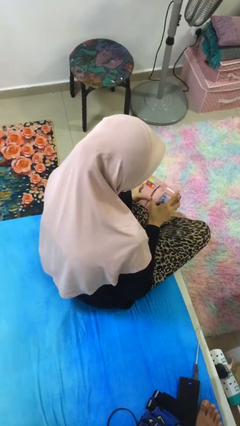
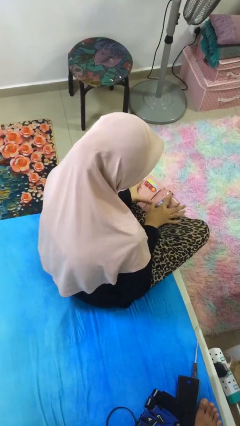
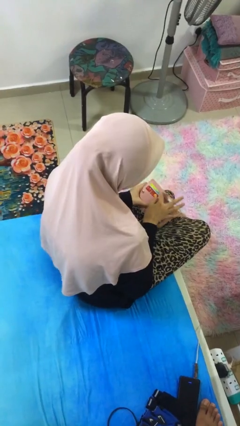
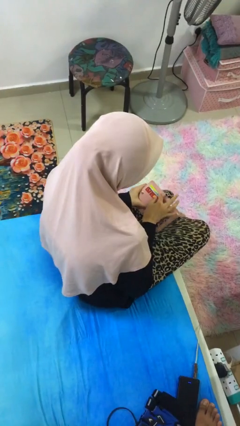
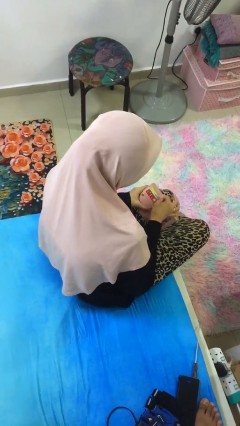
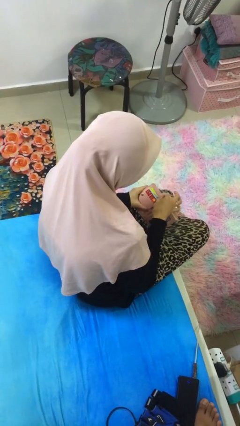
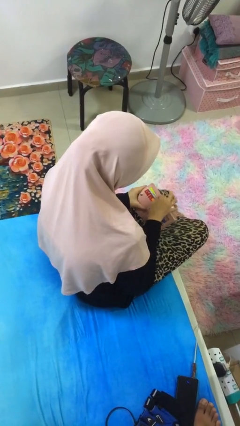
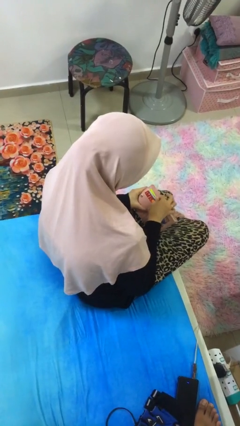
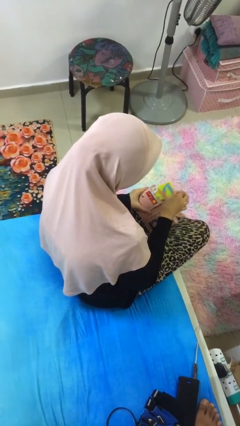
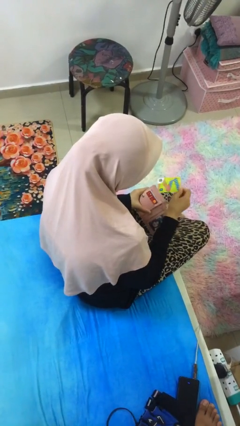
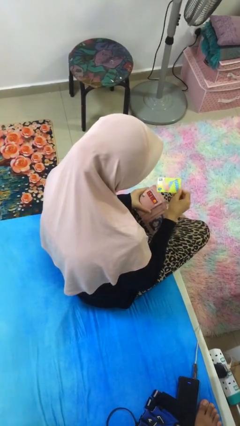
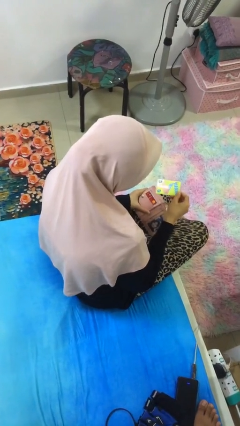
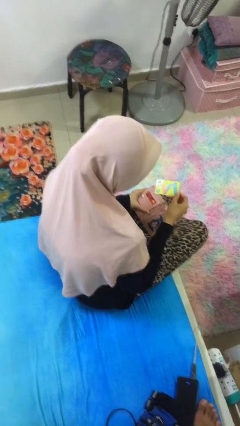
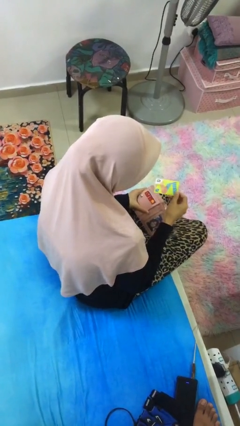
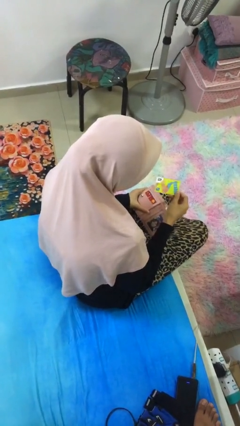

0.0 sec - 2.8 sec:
person takes object from purse

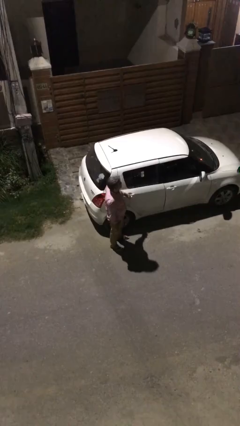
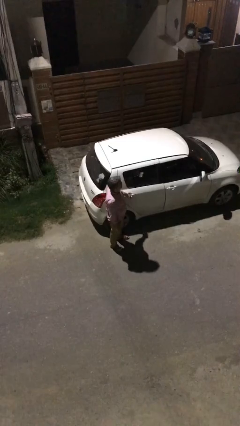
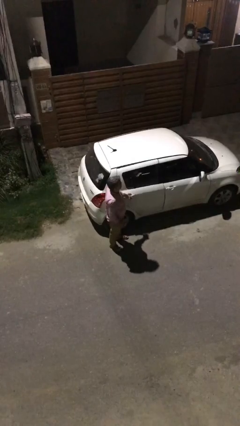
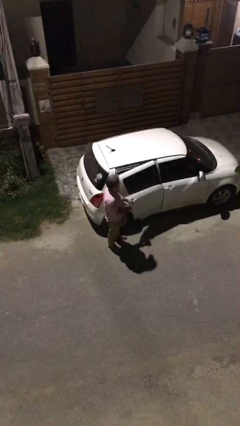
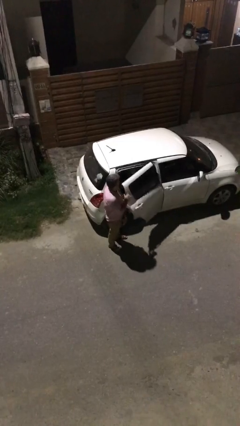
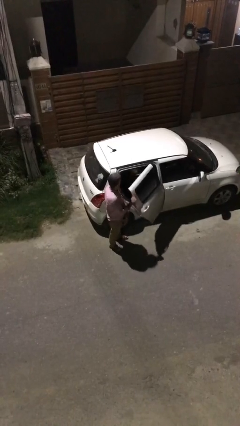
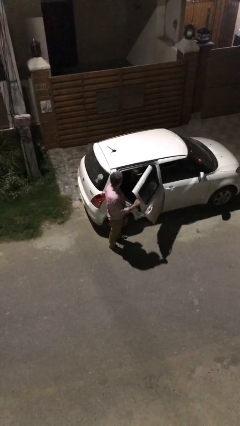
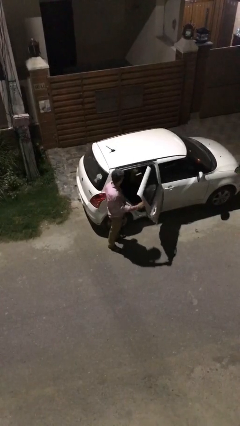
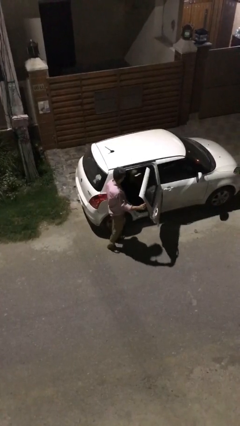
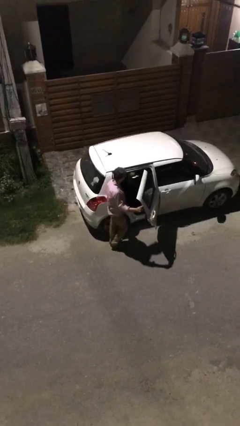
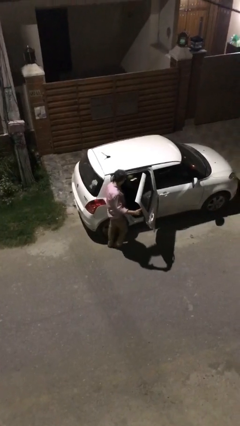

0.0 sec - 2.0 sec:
person opens car door

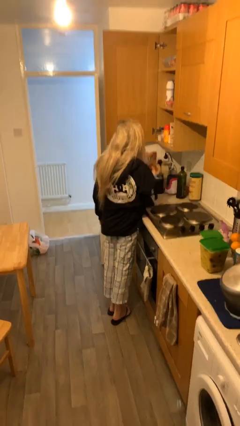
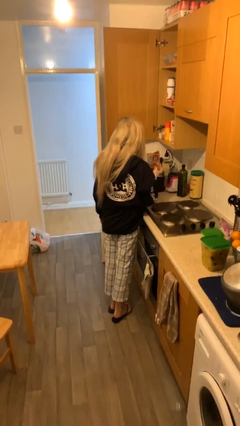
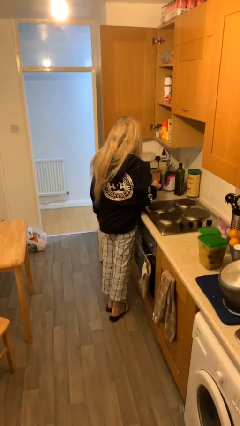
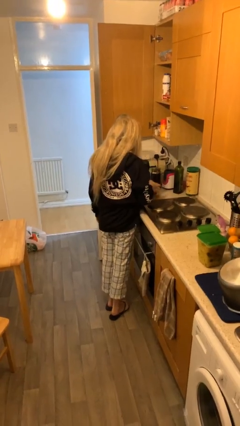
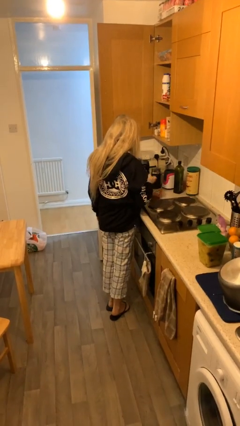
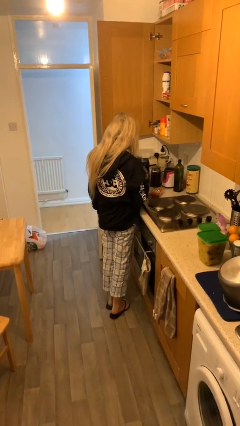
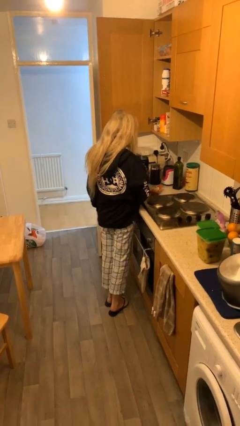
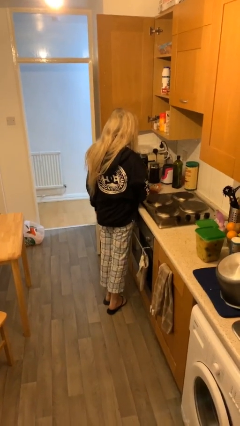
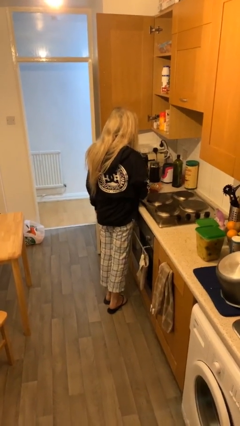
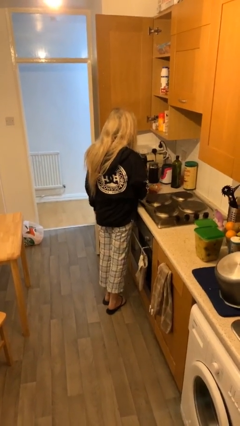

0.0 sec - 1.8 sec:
person puts down object on table

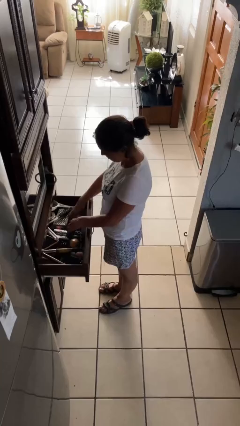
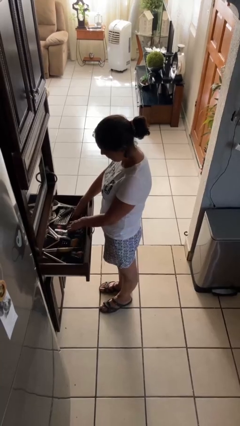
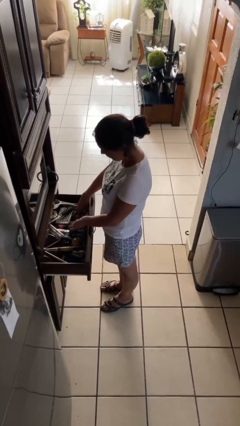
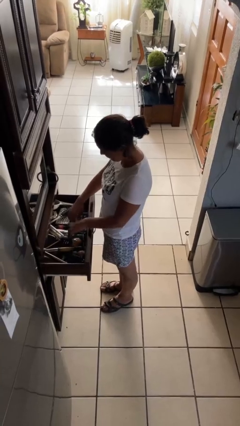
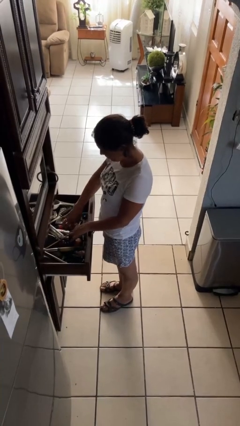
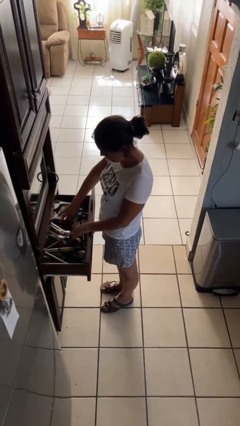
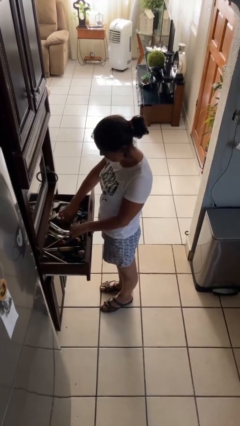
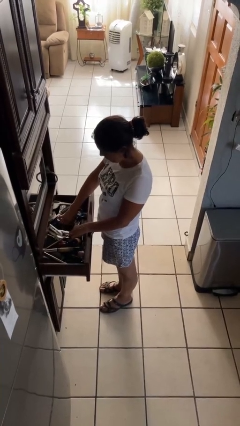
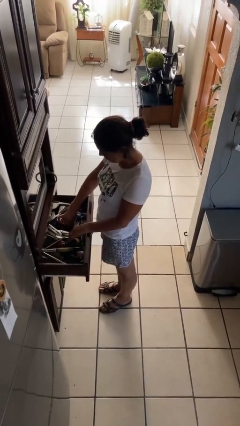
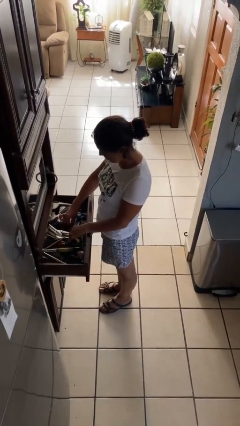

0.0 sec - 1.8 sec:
person searches in kitchen drawer

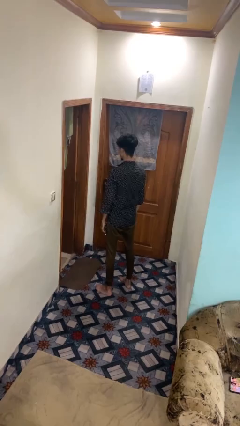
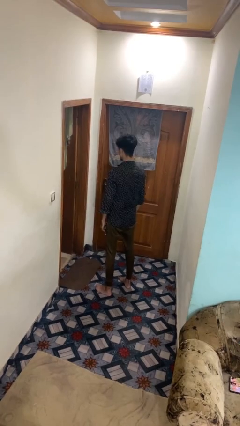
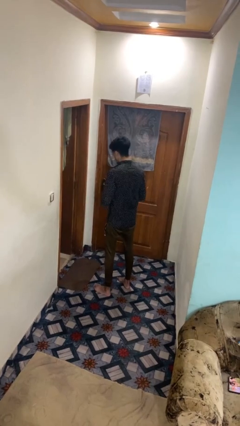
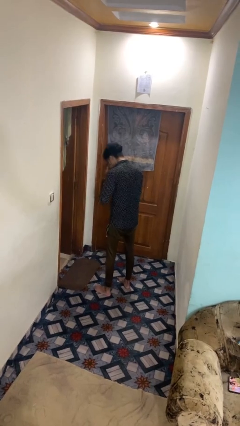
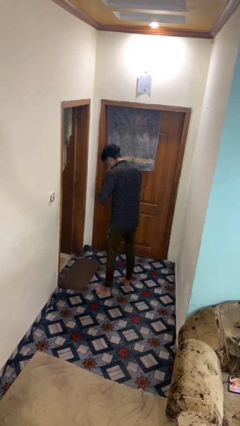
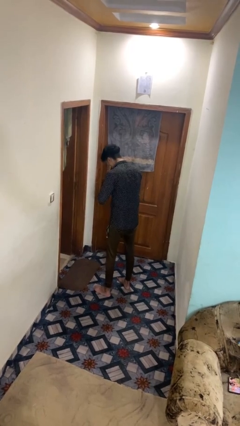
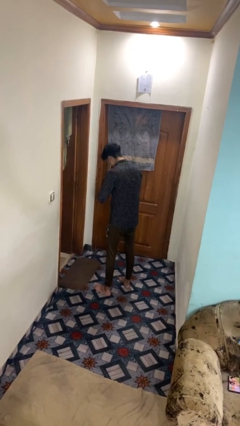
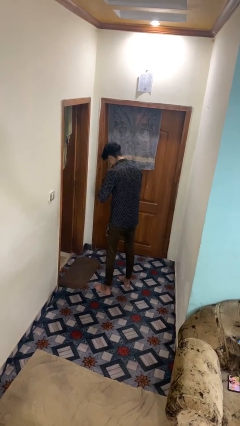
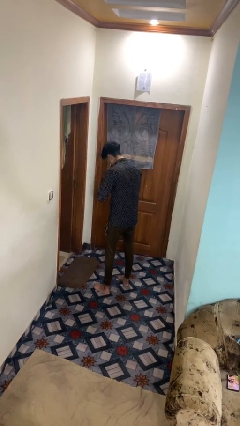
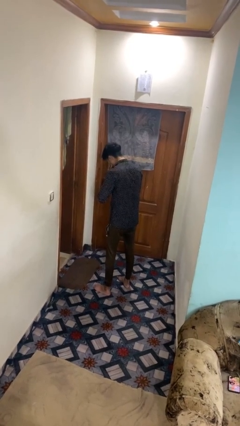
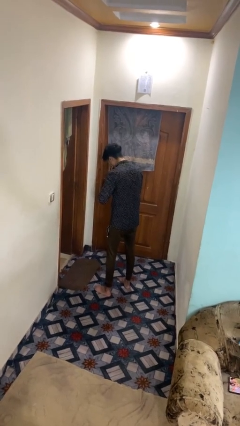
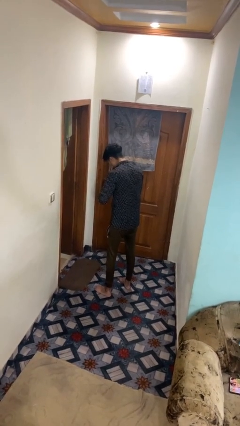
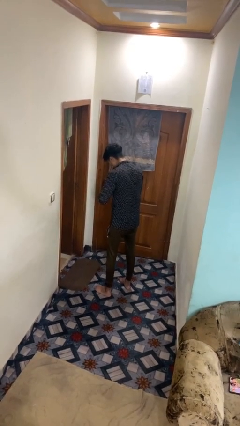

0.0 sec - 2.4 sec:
person sneezes into hand

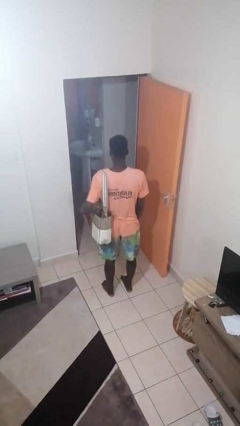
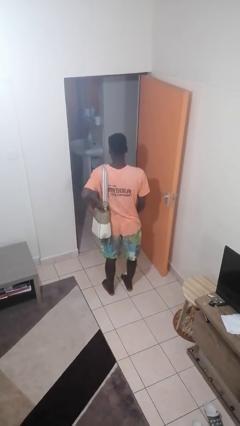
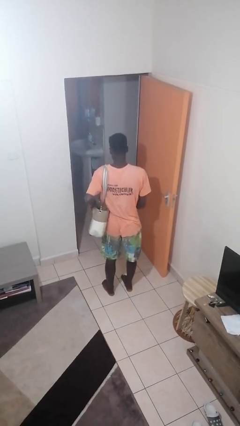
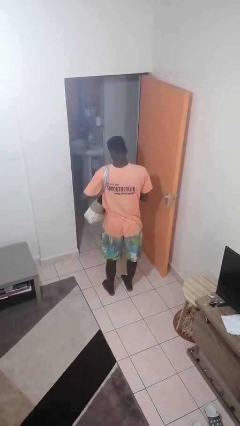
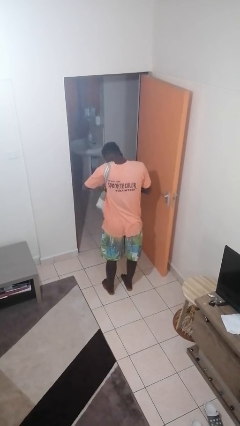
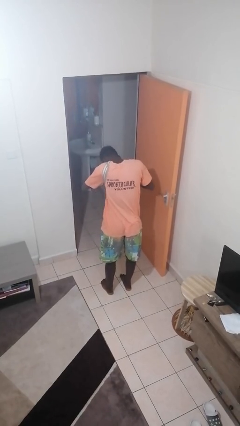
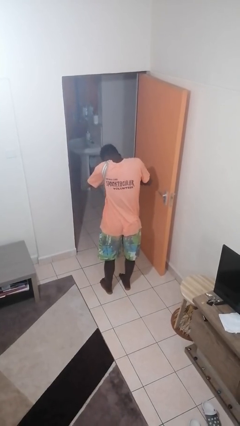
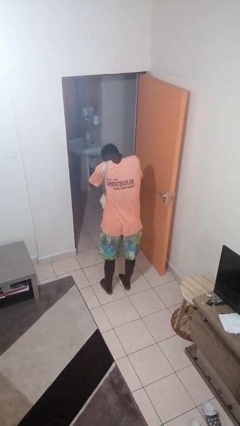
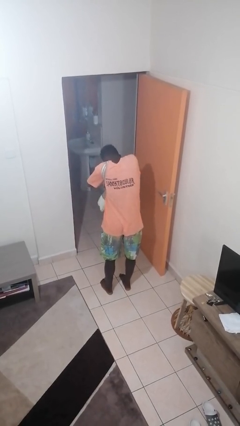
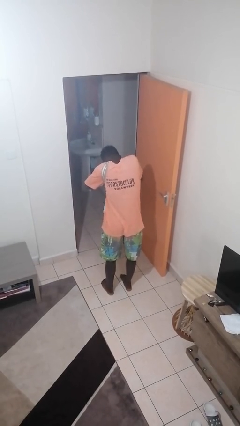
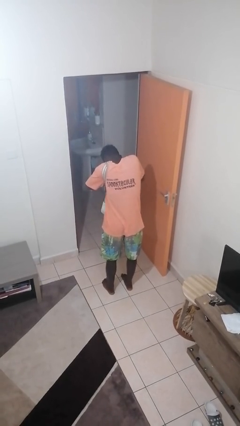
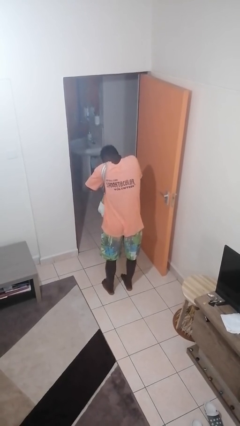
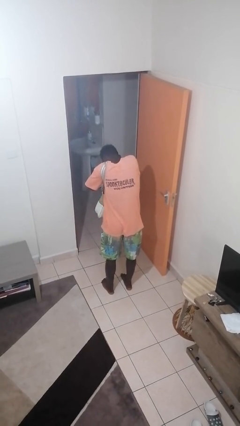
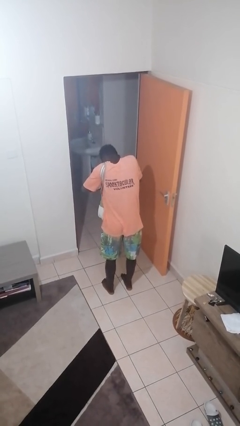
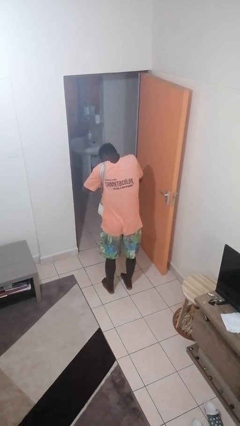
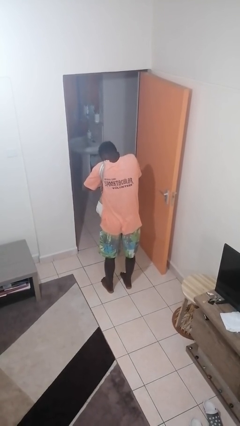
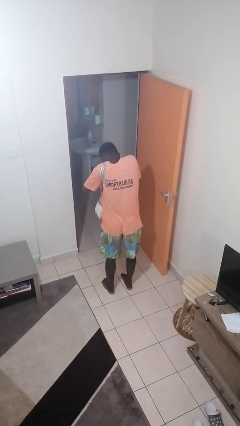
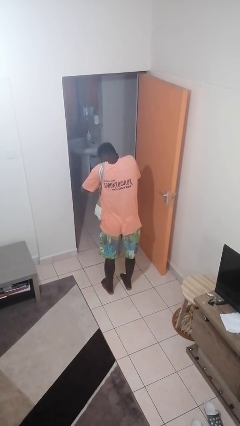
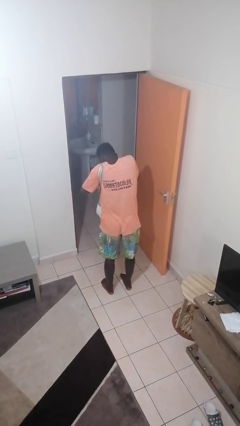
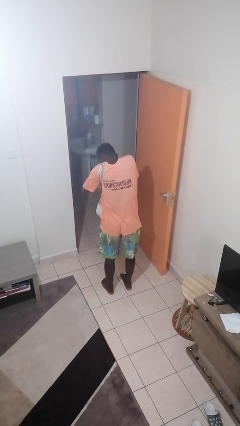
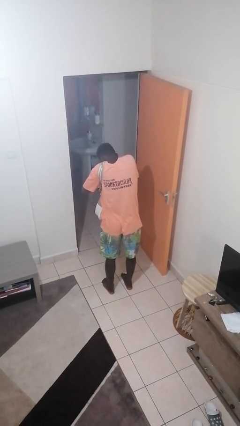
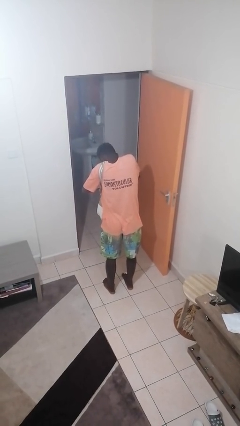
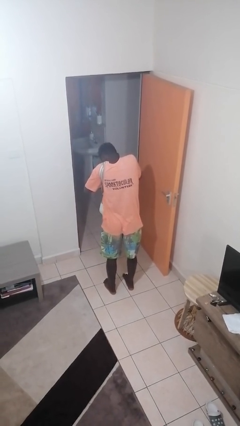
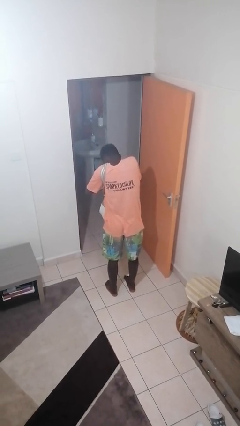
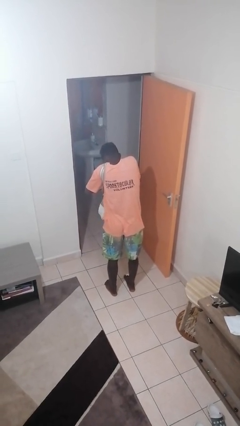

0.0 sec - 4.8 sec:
person searches in purse

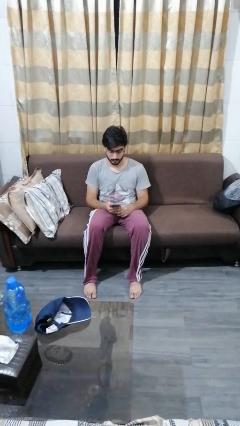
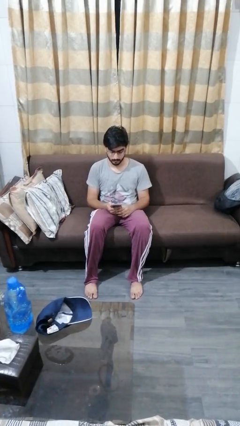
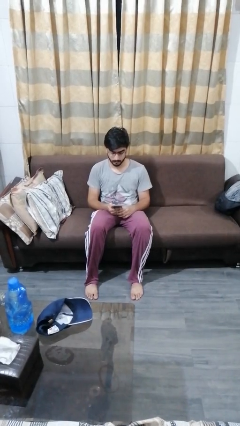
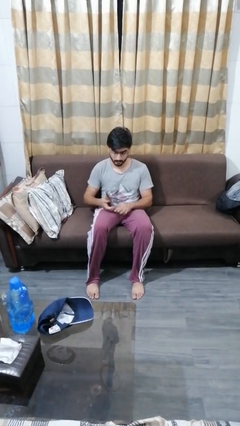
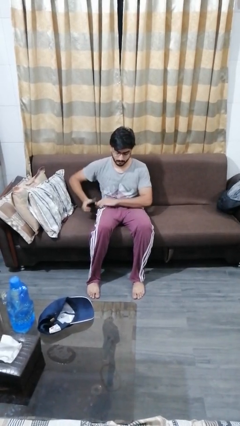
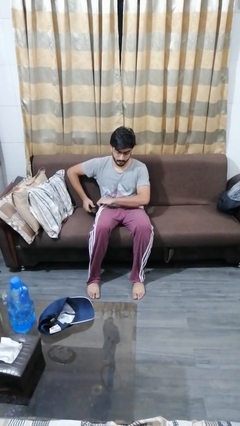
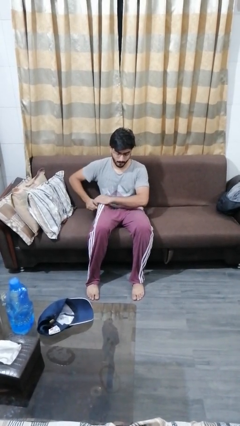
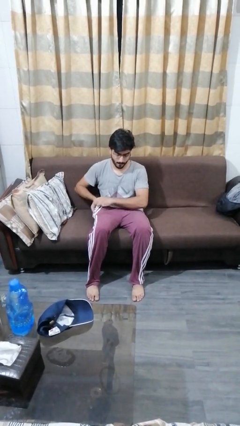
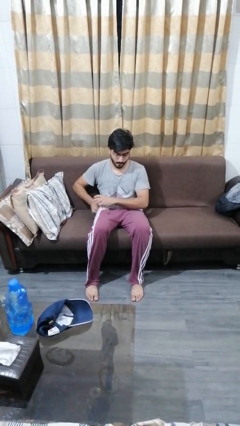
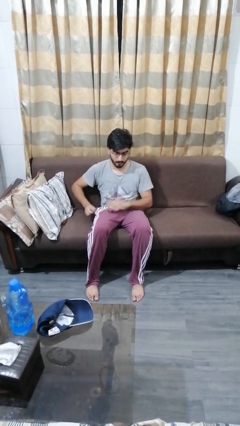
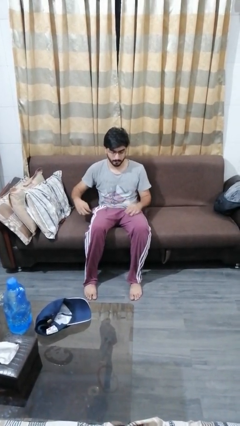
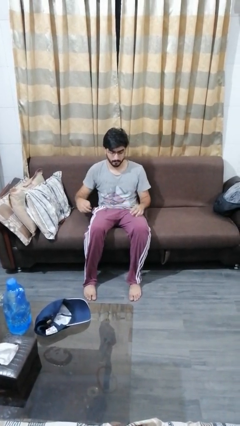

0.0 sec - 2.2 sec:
person puts phone into pocket
